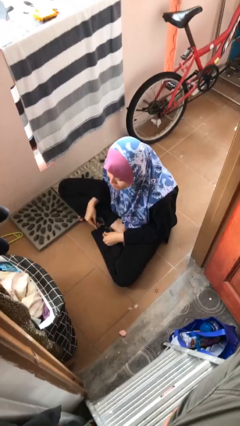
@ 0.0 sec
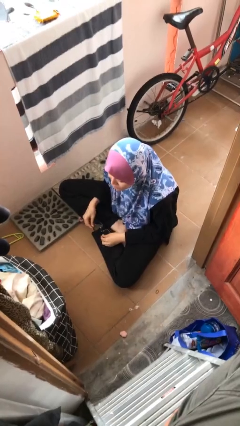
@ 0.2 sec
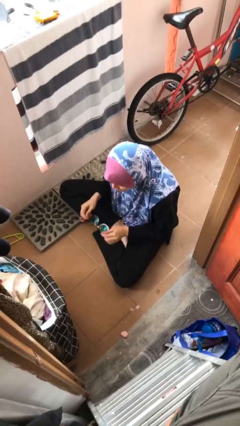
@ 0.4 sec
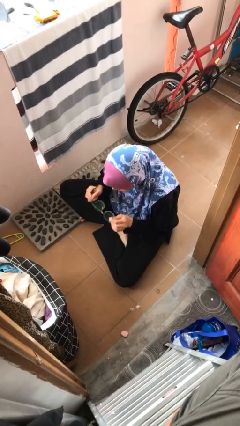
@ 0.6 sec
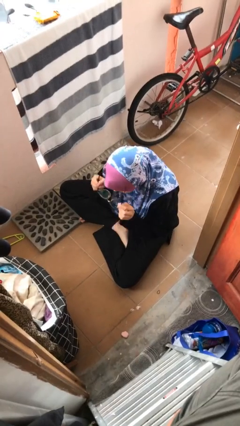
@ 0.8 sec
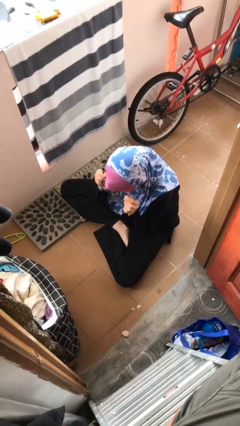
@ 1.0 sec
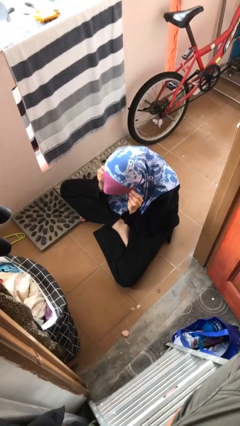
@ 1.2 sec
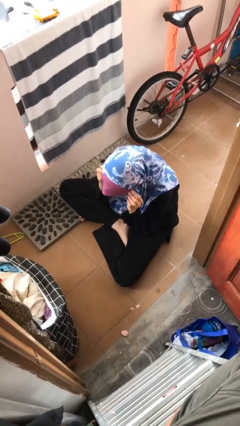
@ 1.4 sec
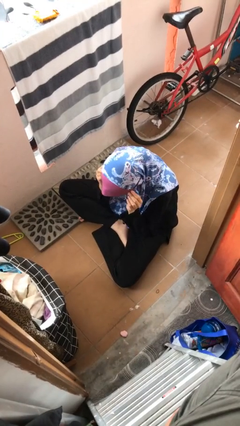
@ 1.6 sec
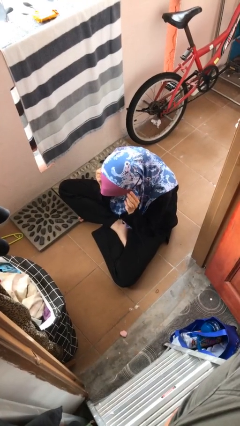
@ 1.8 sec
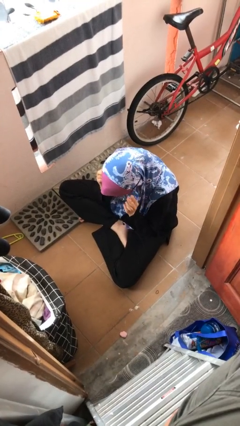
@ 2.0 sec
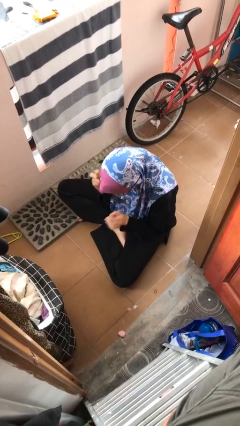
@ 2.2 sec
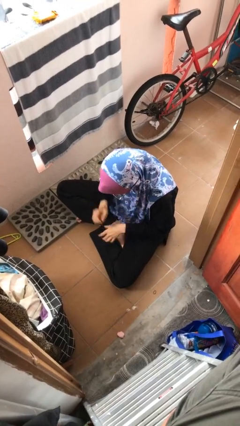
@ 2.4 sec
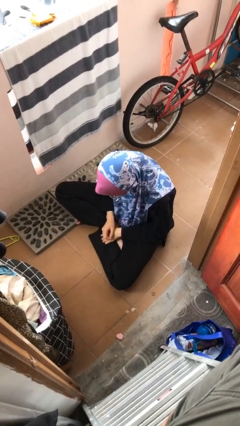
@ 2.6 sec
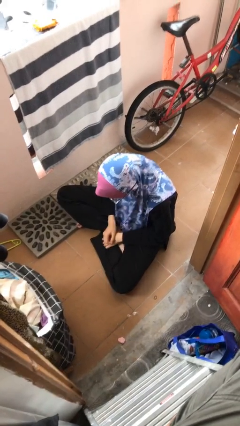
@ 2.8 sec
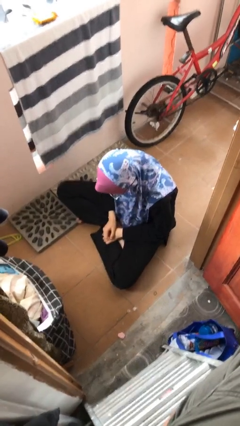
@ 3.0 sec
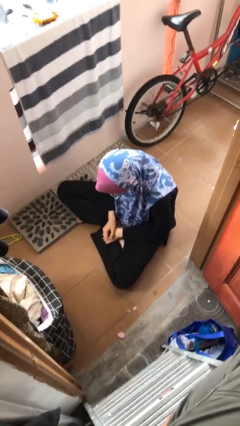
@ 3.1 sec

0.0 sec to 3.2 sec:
person puts on glasses

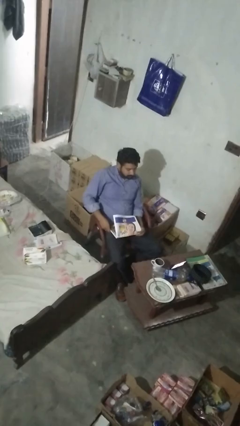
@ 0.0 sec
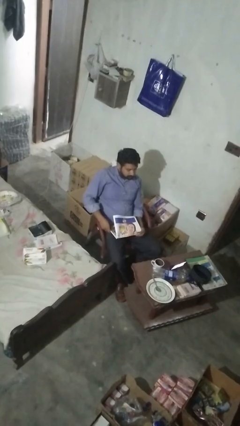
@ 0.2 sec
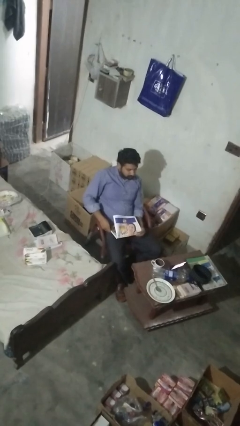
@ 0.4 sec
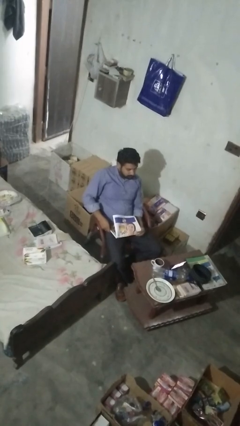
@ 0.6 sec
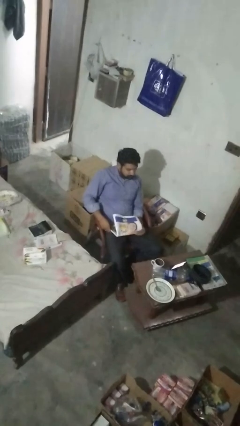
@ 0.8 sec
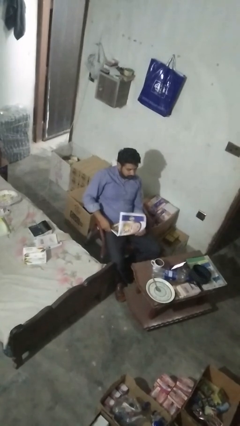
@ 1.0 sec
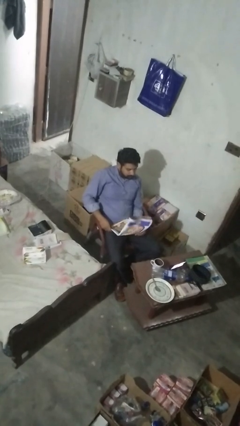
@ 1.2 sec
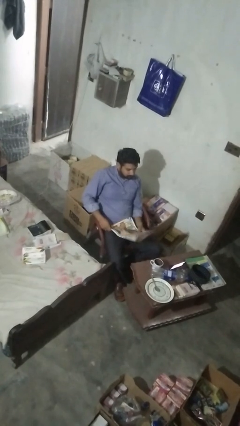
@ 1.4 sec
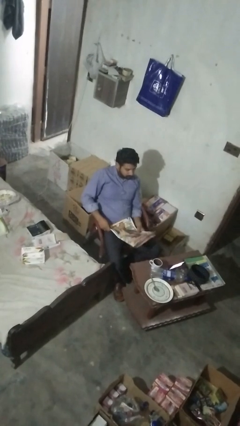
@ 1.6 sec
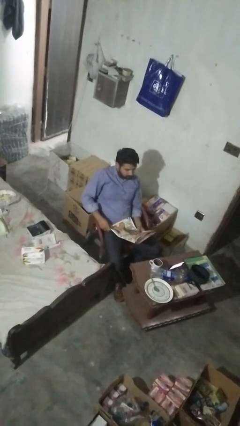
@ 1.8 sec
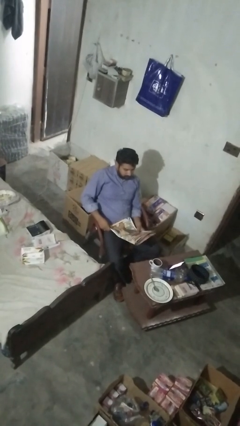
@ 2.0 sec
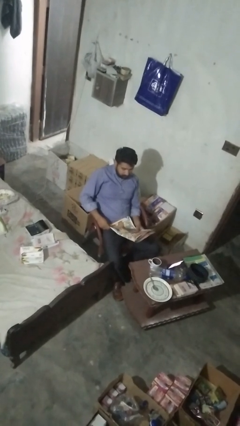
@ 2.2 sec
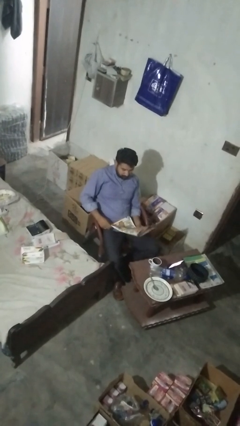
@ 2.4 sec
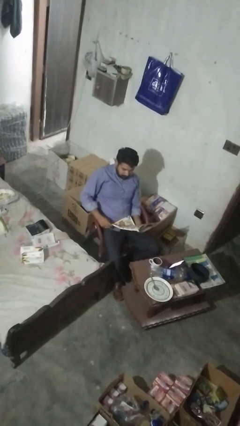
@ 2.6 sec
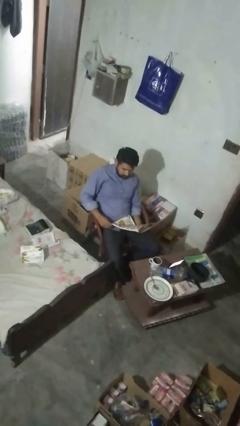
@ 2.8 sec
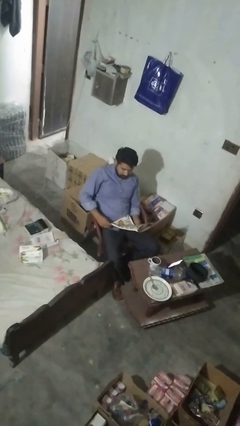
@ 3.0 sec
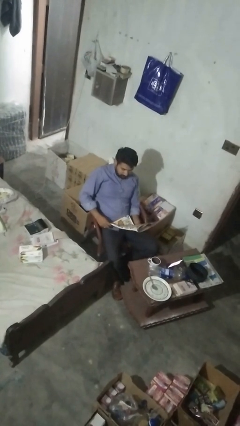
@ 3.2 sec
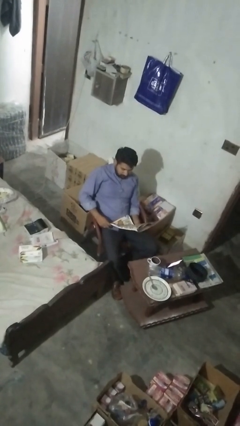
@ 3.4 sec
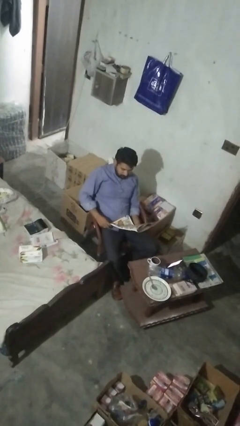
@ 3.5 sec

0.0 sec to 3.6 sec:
person reads magazine

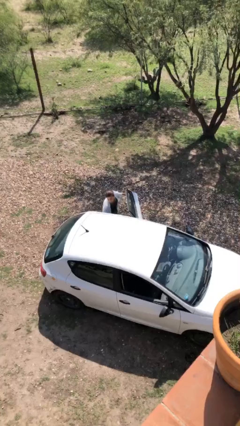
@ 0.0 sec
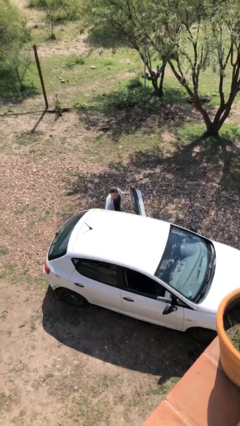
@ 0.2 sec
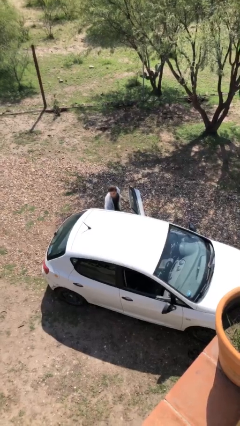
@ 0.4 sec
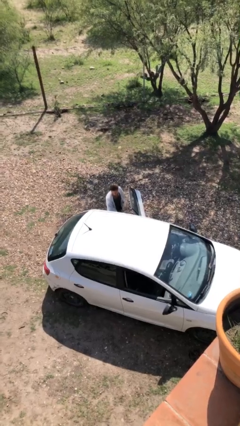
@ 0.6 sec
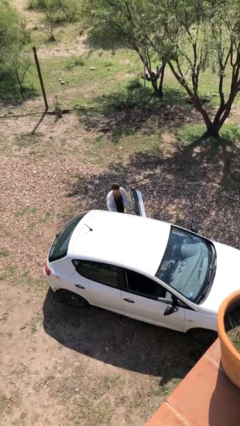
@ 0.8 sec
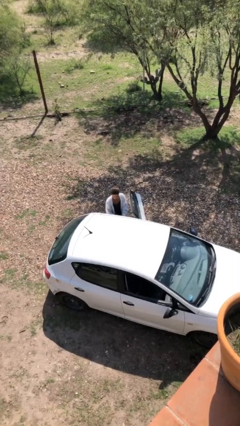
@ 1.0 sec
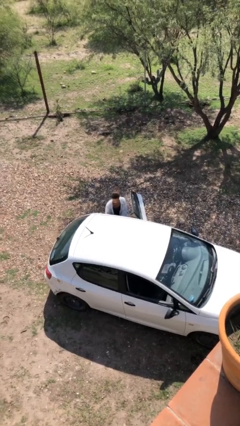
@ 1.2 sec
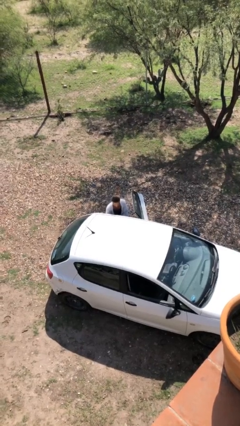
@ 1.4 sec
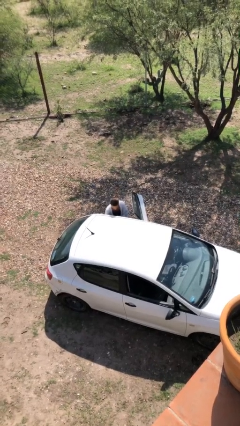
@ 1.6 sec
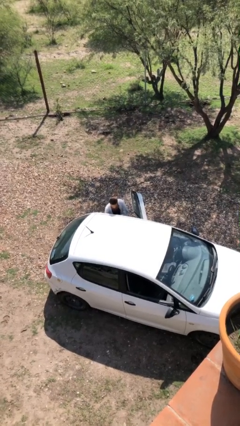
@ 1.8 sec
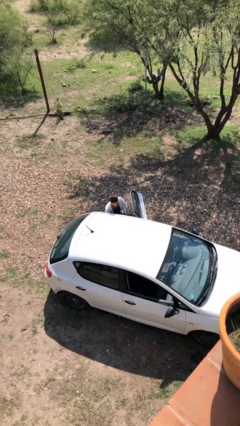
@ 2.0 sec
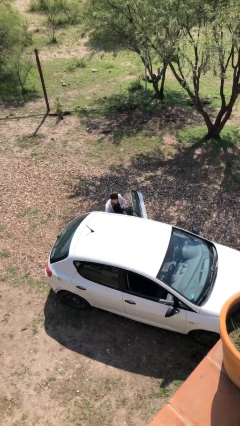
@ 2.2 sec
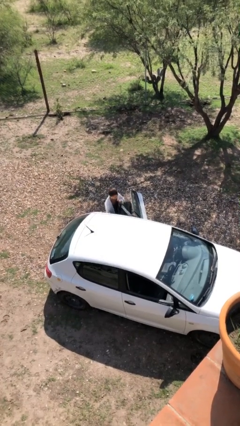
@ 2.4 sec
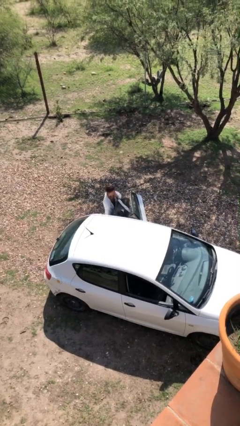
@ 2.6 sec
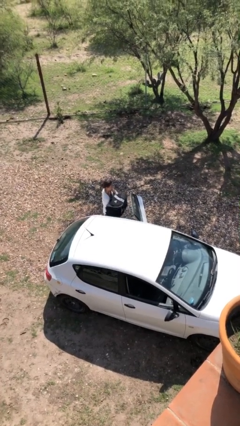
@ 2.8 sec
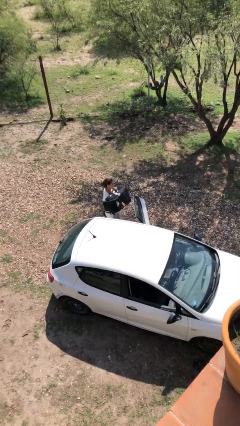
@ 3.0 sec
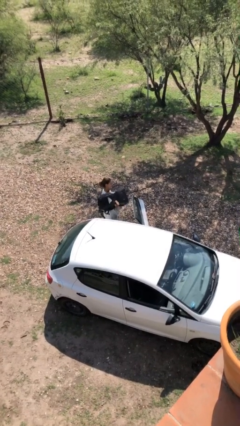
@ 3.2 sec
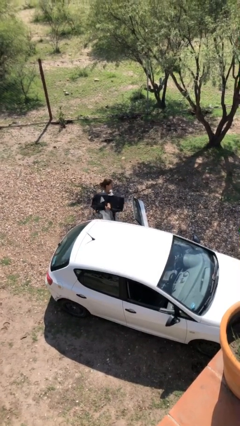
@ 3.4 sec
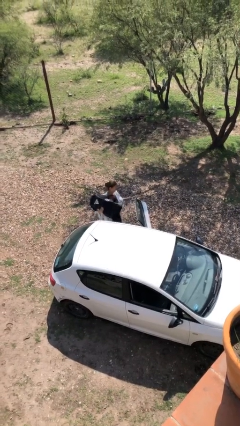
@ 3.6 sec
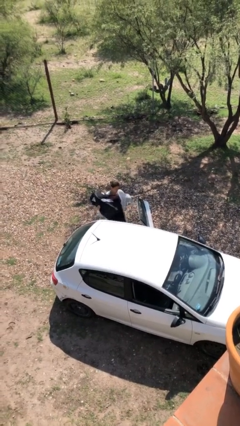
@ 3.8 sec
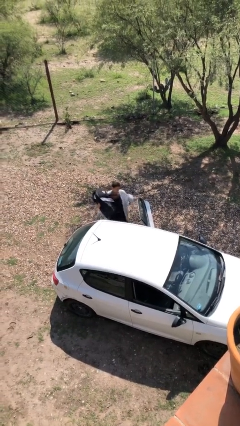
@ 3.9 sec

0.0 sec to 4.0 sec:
person unloads car

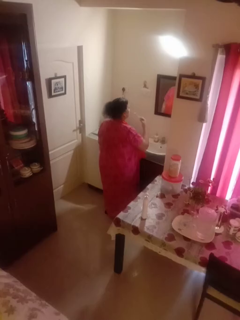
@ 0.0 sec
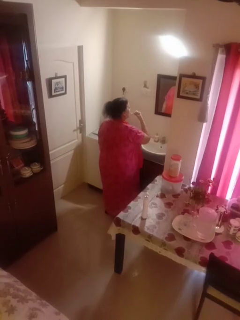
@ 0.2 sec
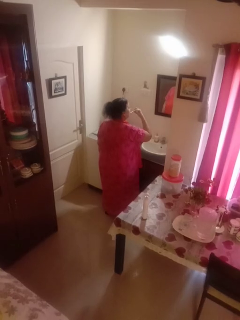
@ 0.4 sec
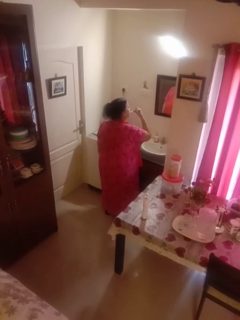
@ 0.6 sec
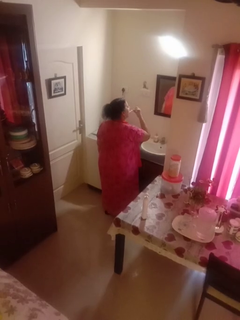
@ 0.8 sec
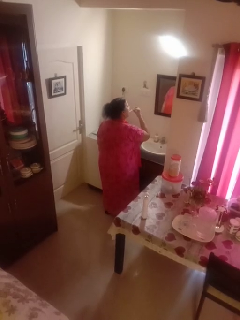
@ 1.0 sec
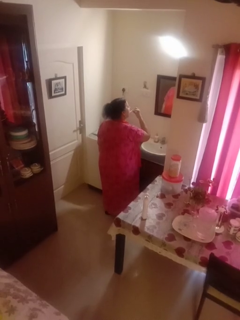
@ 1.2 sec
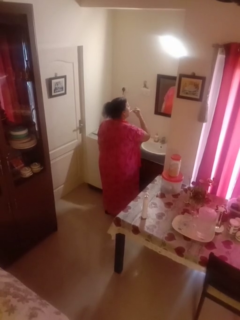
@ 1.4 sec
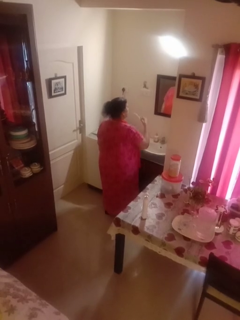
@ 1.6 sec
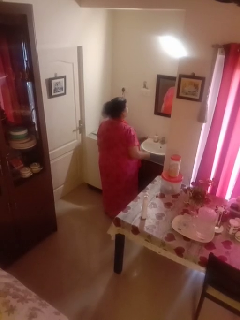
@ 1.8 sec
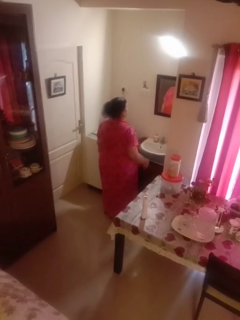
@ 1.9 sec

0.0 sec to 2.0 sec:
person brushes teeth

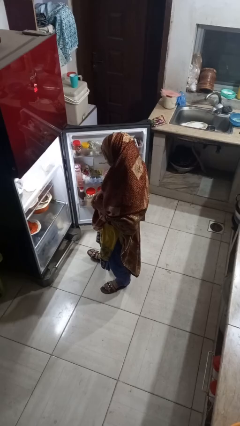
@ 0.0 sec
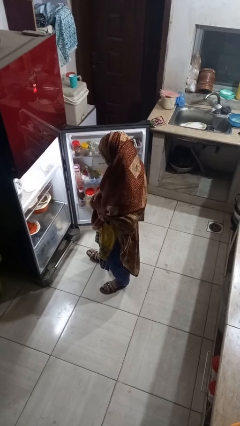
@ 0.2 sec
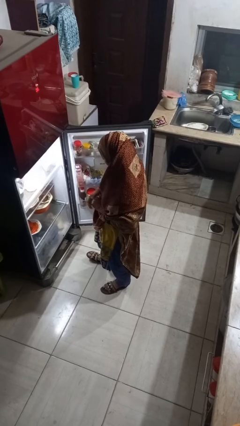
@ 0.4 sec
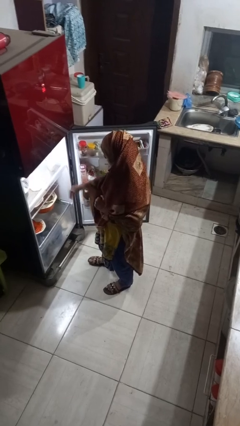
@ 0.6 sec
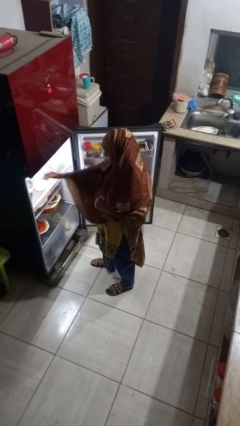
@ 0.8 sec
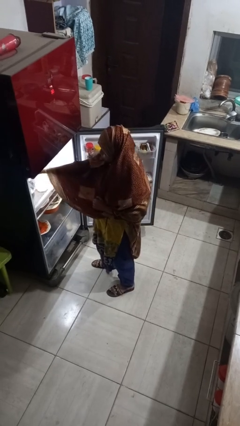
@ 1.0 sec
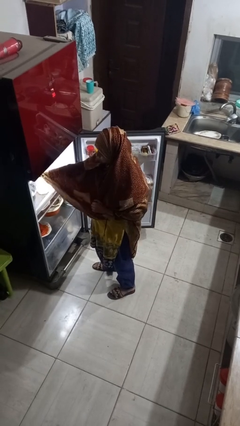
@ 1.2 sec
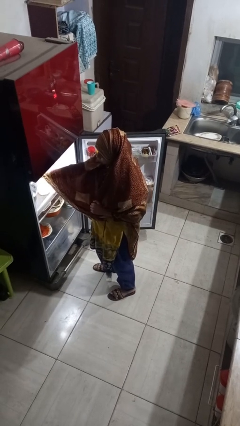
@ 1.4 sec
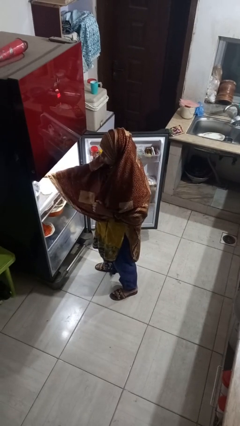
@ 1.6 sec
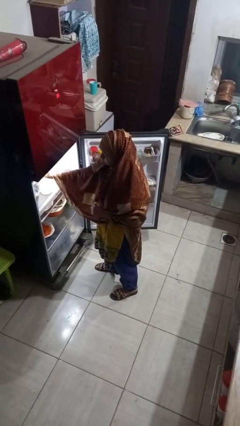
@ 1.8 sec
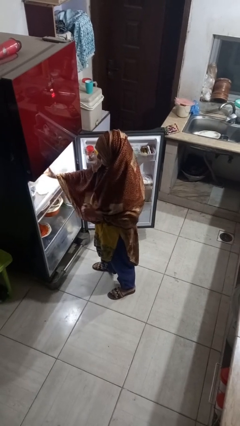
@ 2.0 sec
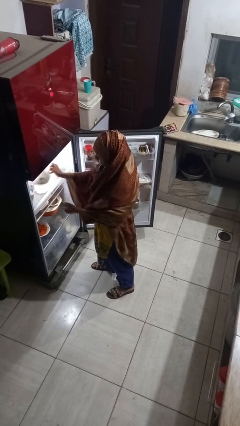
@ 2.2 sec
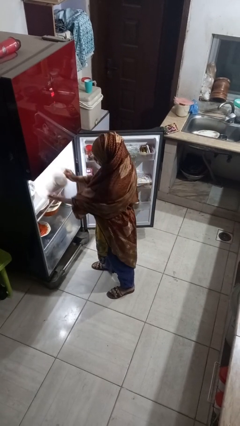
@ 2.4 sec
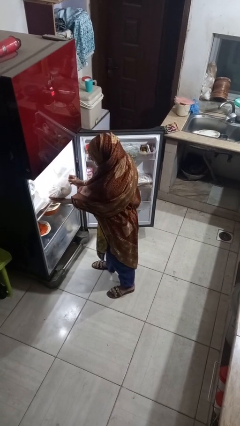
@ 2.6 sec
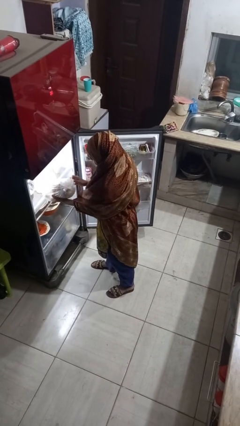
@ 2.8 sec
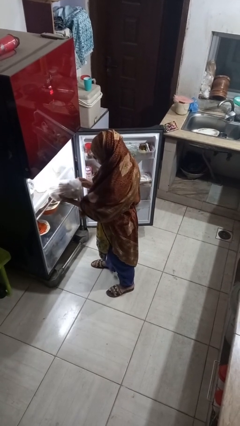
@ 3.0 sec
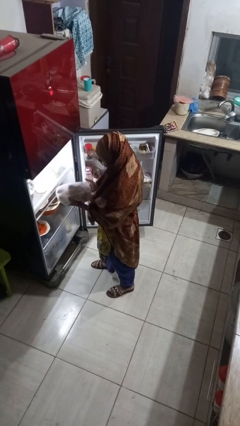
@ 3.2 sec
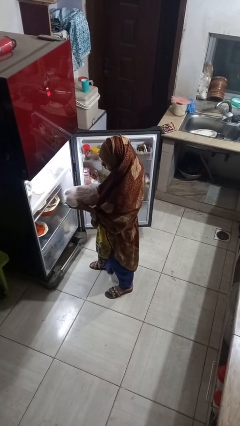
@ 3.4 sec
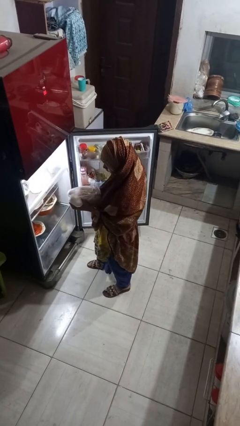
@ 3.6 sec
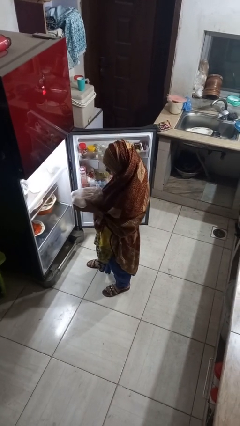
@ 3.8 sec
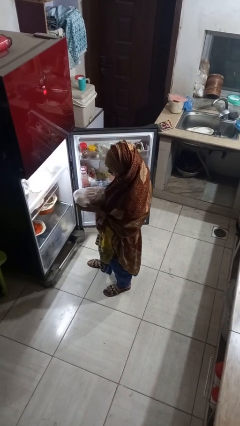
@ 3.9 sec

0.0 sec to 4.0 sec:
person takes object from refrigerator

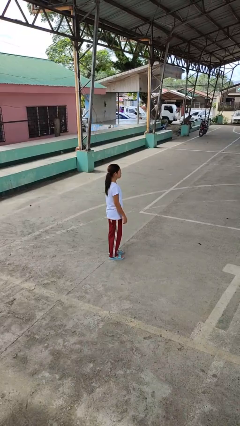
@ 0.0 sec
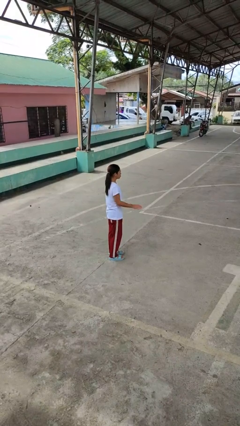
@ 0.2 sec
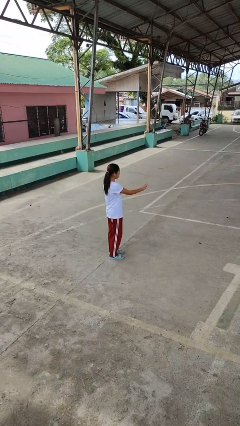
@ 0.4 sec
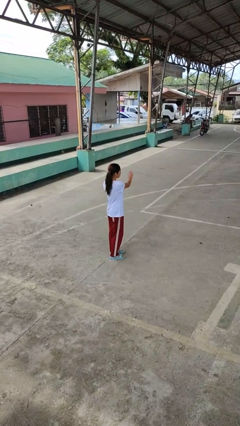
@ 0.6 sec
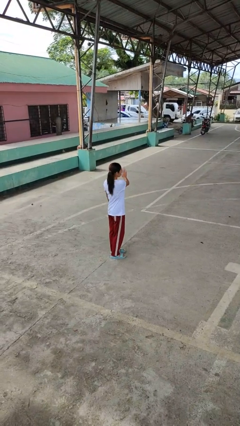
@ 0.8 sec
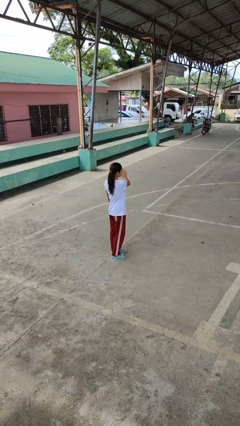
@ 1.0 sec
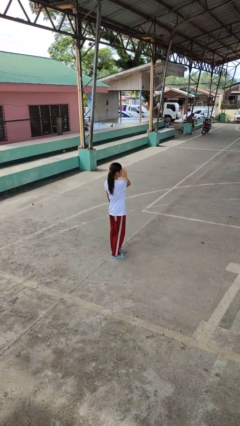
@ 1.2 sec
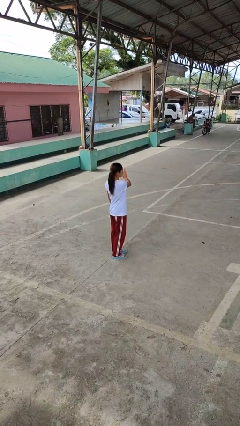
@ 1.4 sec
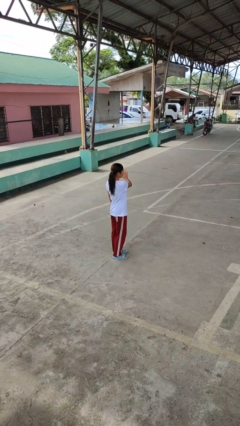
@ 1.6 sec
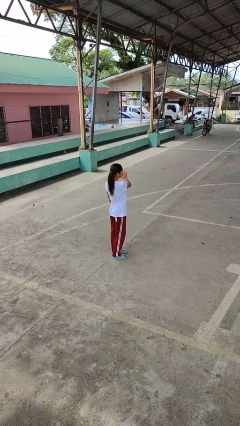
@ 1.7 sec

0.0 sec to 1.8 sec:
person gestures swipe left
